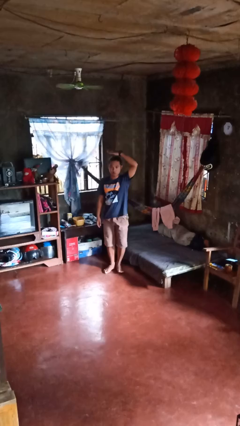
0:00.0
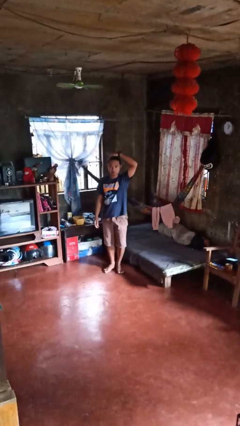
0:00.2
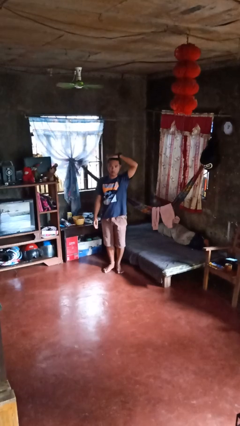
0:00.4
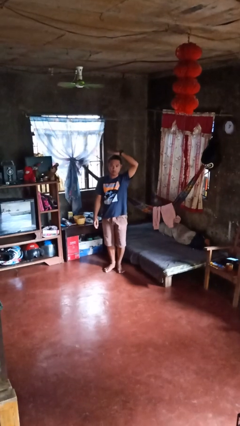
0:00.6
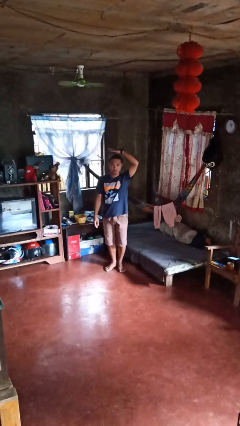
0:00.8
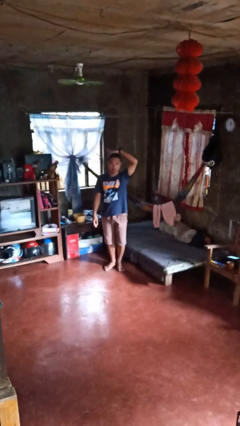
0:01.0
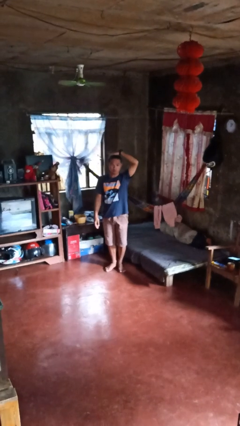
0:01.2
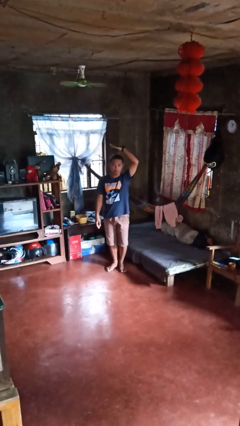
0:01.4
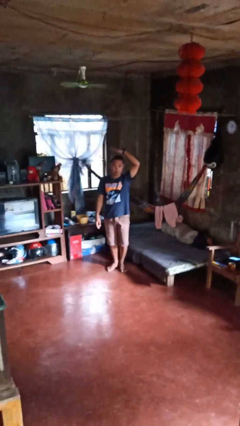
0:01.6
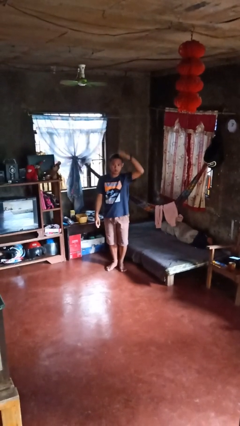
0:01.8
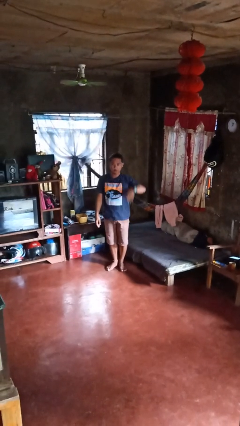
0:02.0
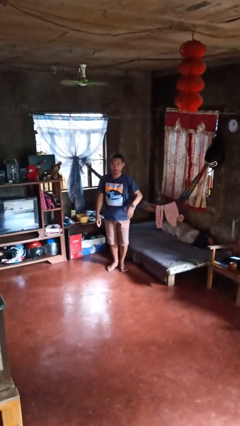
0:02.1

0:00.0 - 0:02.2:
person pats head

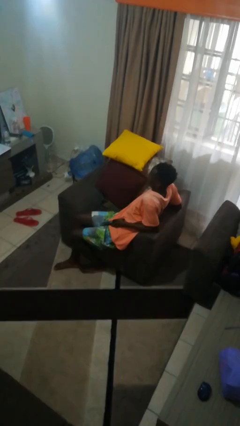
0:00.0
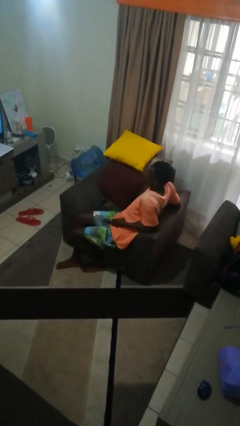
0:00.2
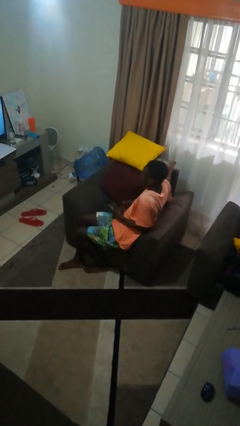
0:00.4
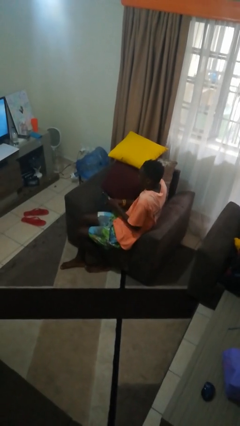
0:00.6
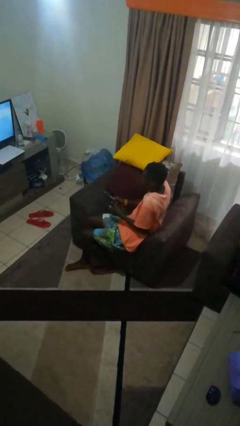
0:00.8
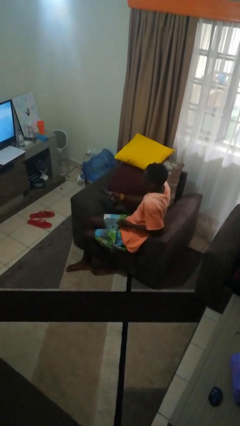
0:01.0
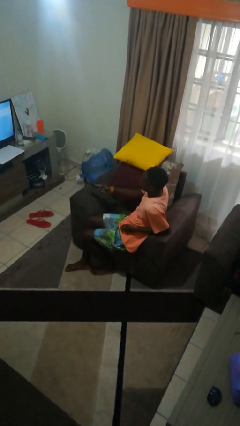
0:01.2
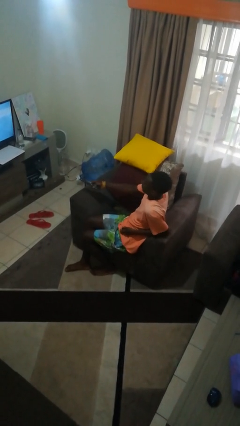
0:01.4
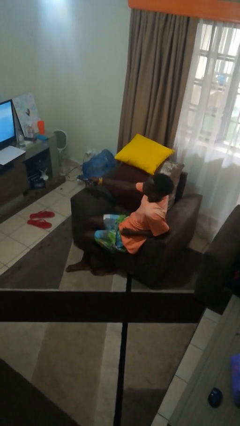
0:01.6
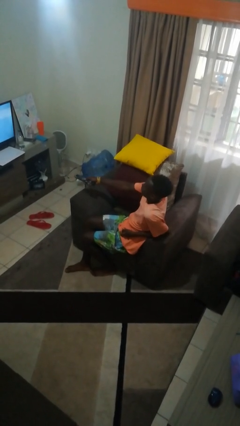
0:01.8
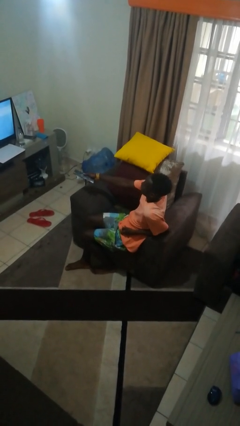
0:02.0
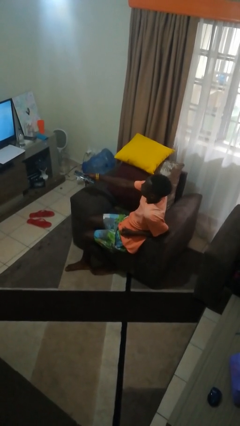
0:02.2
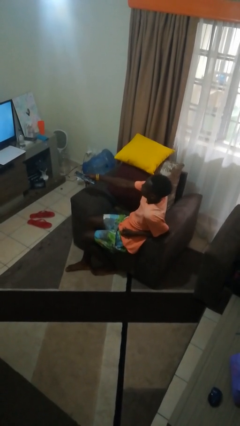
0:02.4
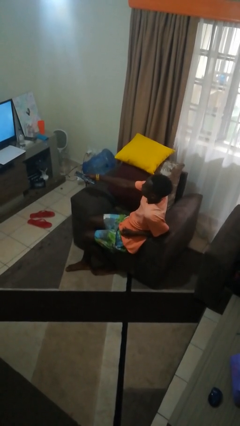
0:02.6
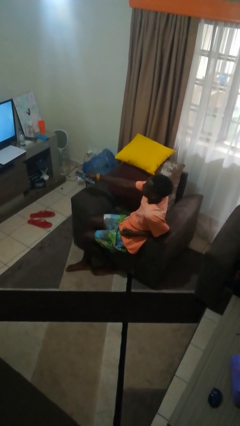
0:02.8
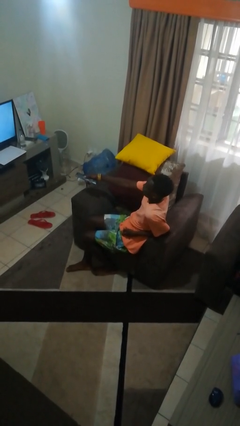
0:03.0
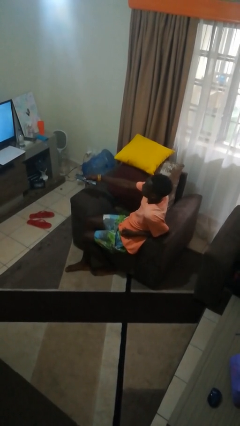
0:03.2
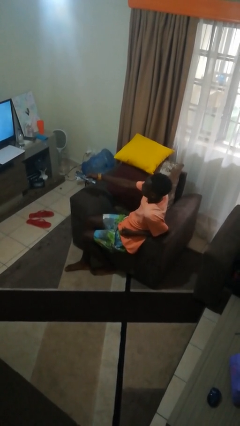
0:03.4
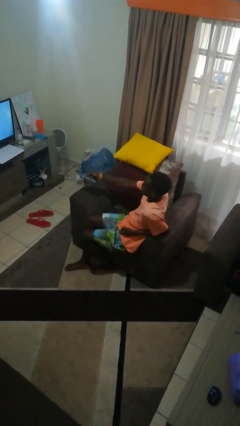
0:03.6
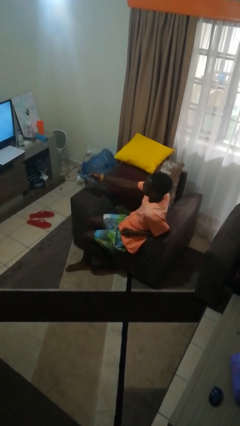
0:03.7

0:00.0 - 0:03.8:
person uses television remote

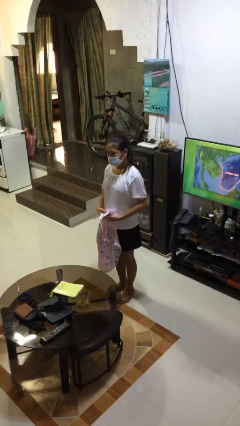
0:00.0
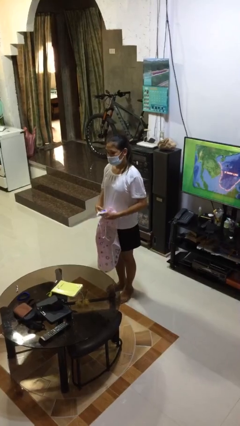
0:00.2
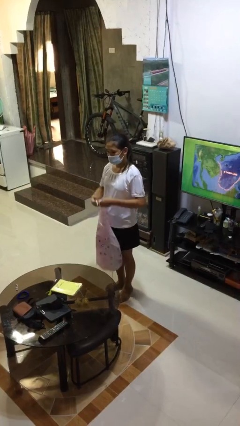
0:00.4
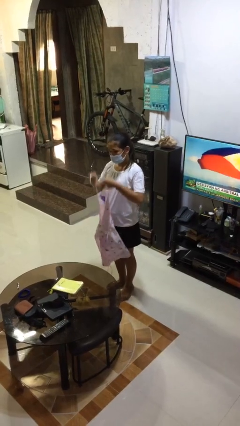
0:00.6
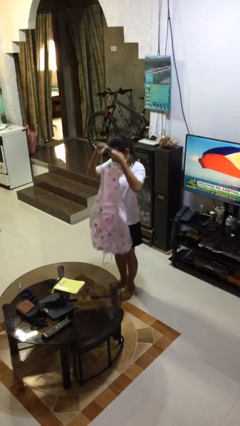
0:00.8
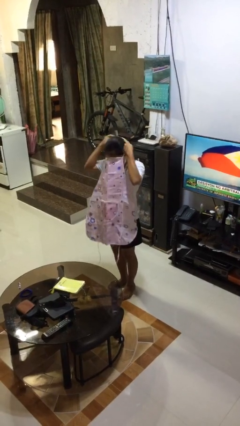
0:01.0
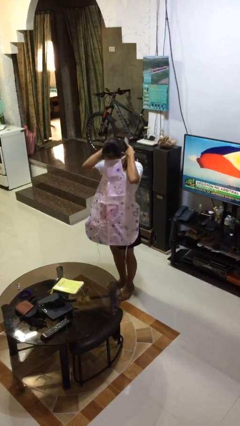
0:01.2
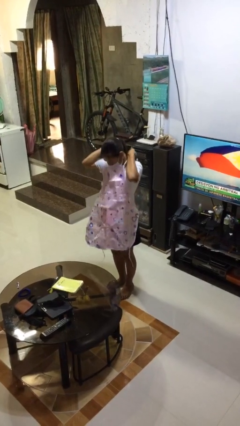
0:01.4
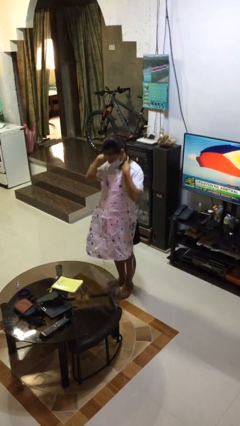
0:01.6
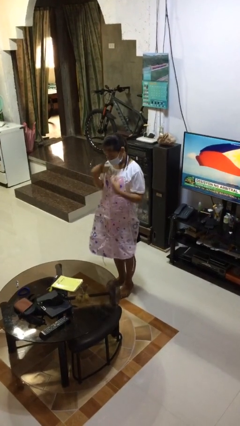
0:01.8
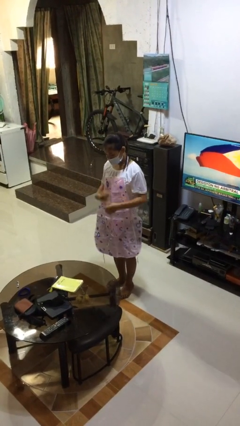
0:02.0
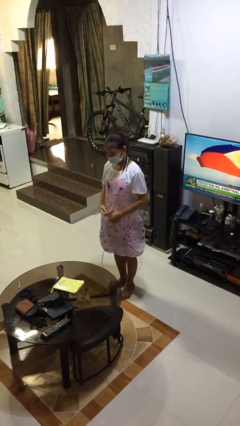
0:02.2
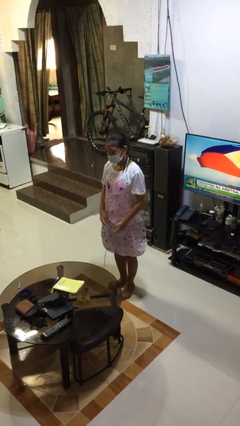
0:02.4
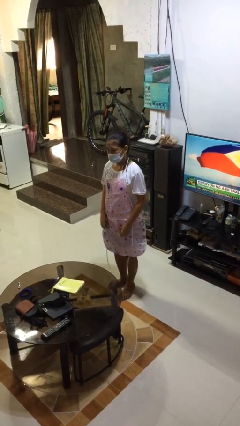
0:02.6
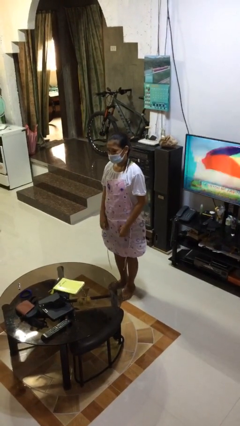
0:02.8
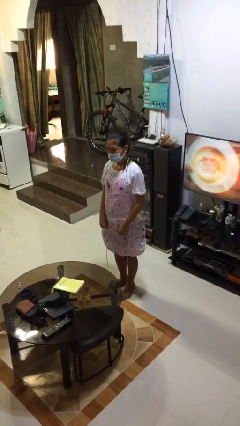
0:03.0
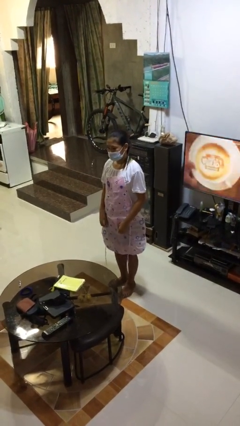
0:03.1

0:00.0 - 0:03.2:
person puts on apron

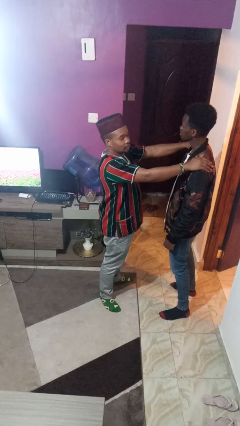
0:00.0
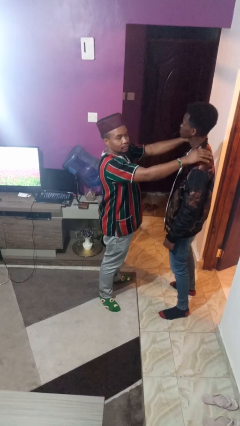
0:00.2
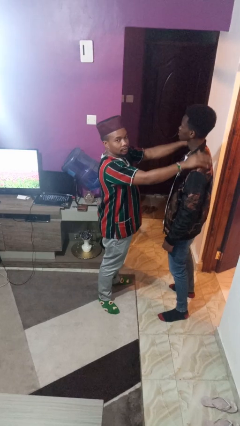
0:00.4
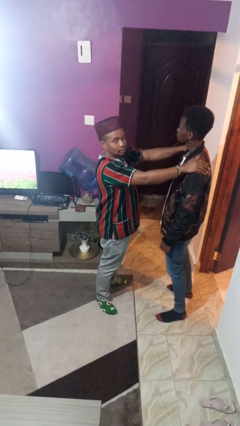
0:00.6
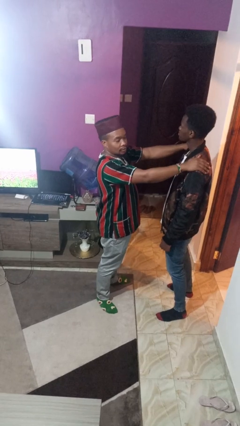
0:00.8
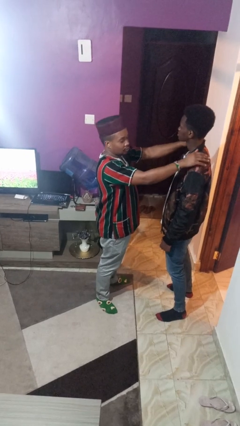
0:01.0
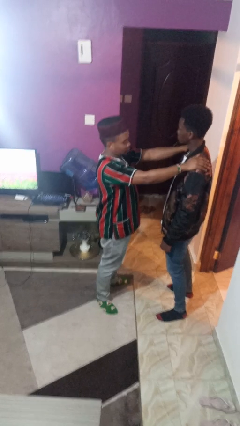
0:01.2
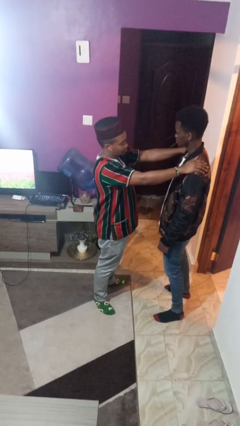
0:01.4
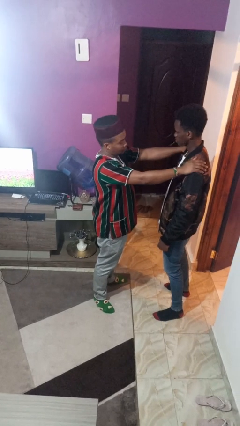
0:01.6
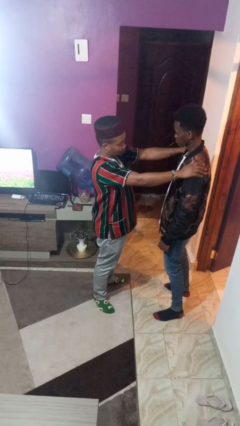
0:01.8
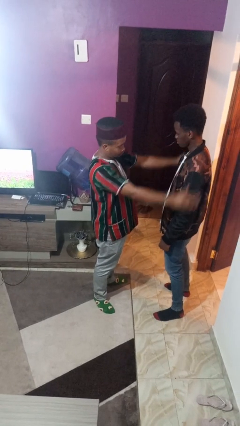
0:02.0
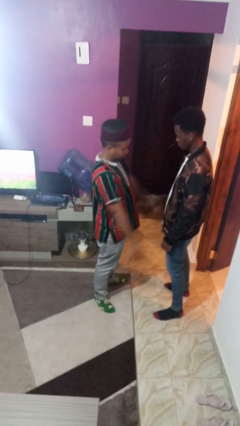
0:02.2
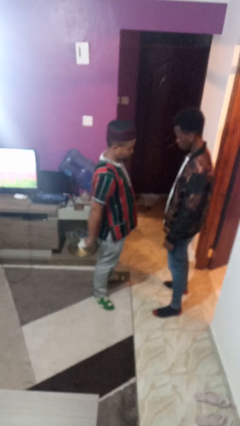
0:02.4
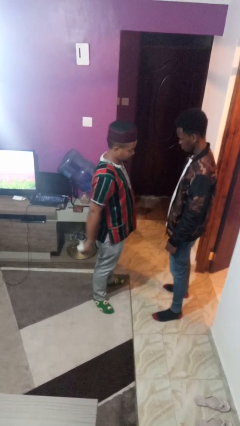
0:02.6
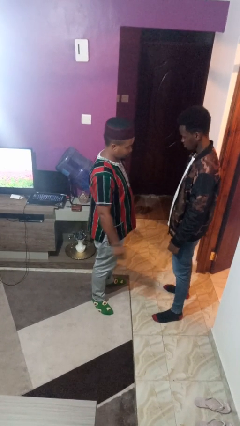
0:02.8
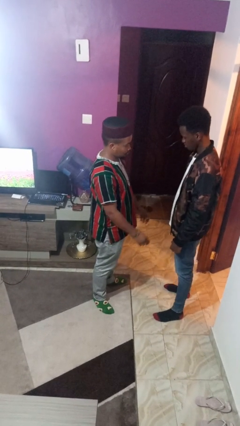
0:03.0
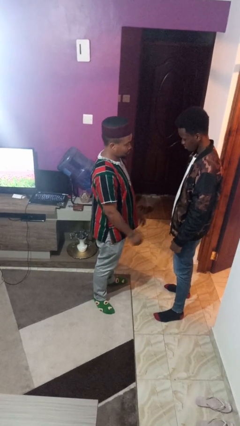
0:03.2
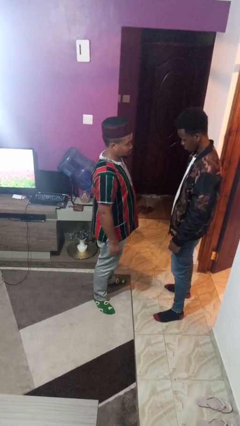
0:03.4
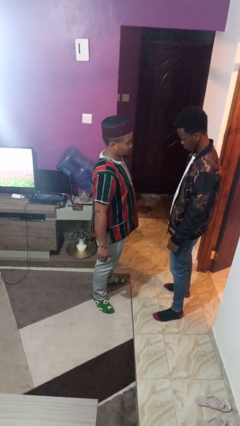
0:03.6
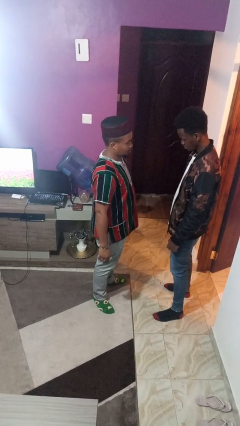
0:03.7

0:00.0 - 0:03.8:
person opens facility door

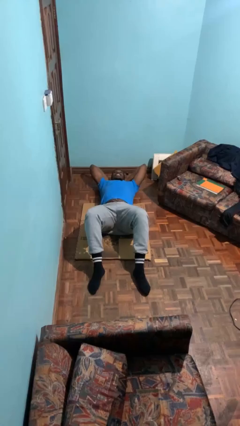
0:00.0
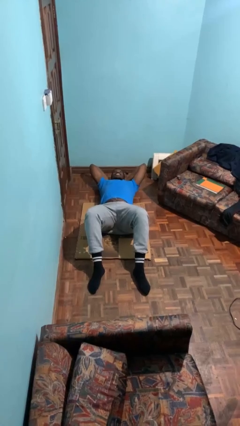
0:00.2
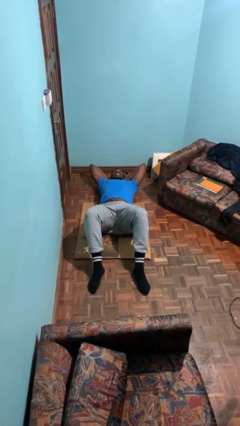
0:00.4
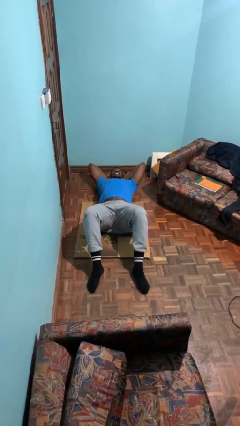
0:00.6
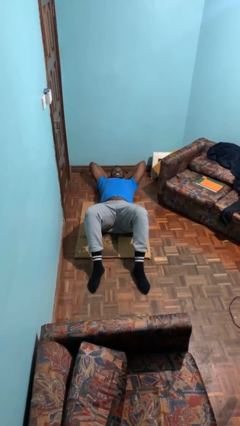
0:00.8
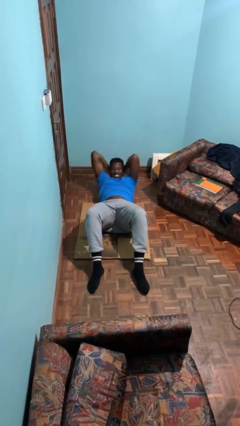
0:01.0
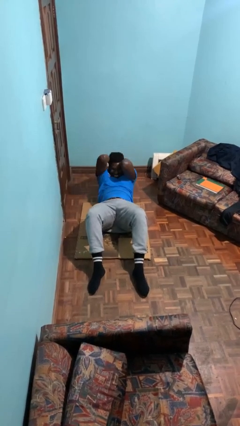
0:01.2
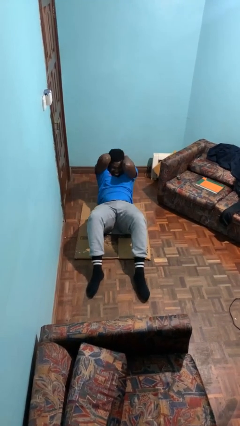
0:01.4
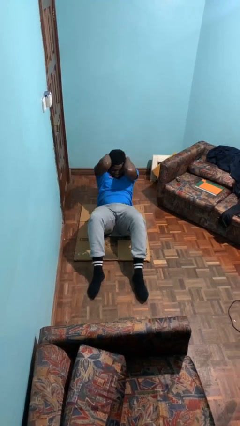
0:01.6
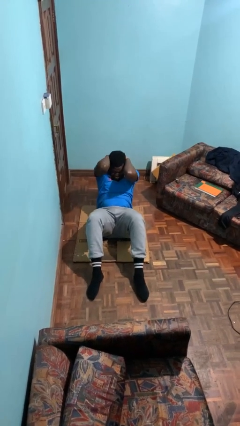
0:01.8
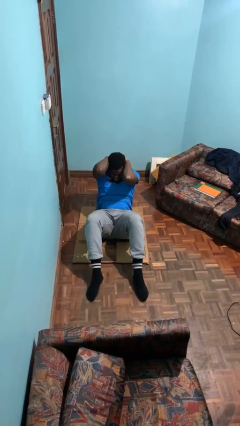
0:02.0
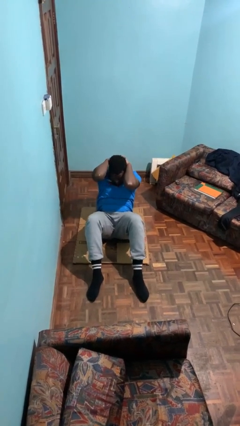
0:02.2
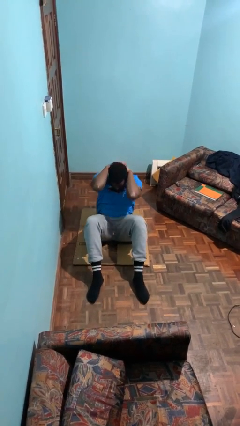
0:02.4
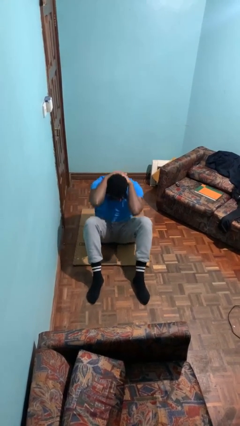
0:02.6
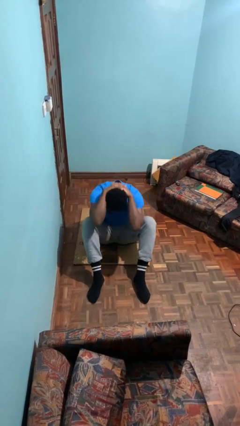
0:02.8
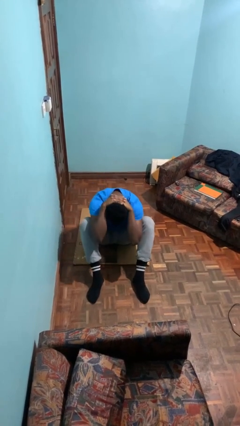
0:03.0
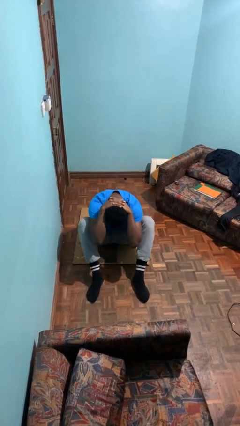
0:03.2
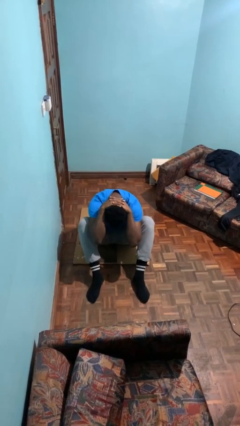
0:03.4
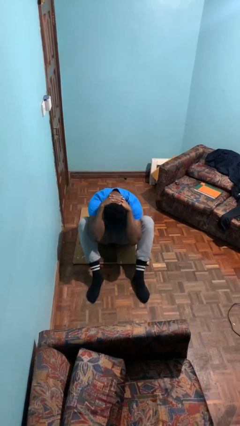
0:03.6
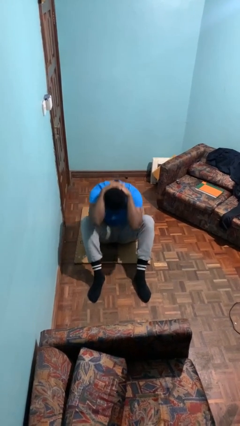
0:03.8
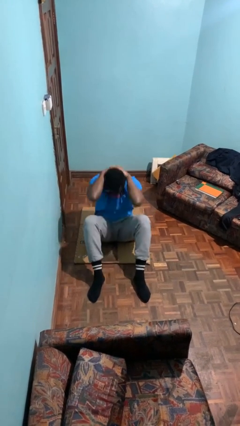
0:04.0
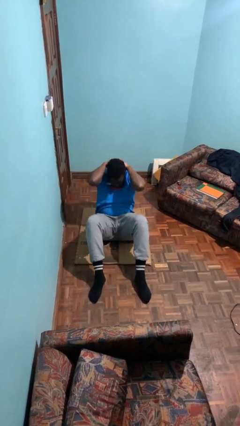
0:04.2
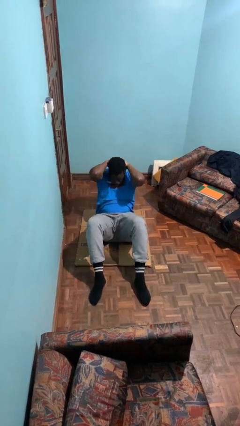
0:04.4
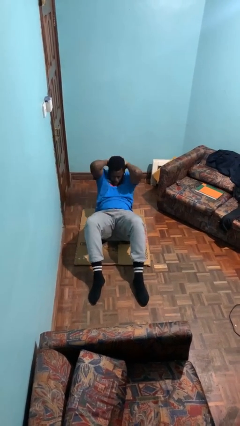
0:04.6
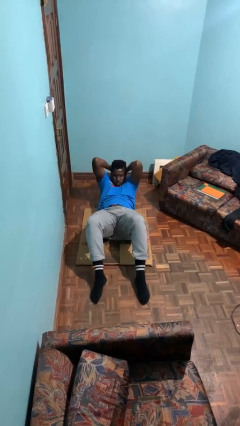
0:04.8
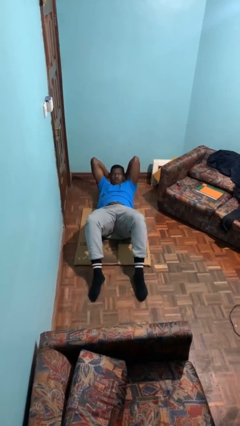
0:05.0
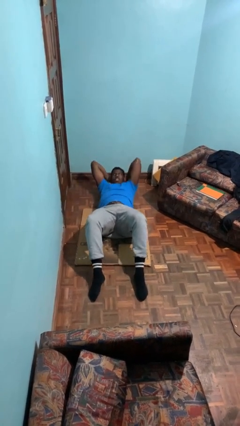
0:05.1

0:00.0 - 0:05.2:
person exercises with situp
